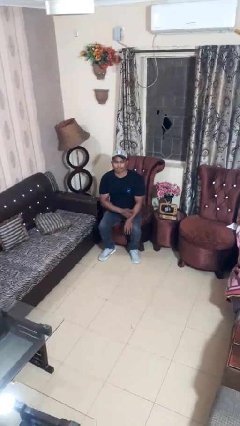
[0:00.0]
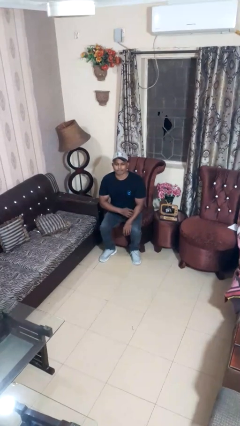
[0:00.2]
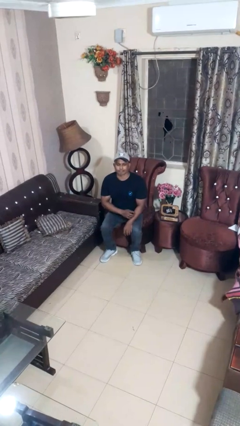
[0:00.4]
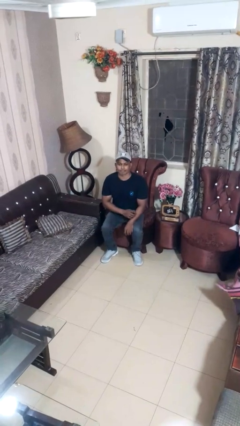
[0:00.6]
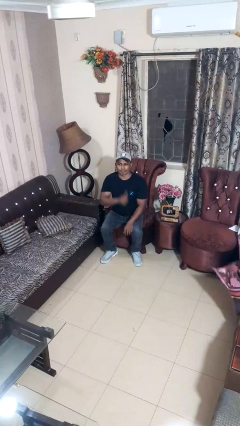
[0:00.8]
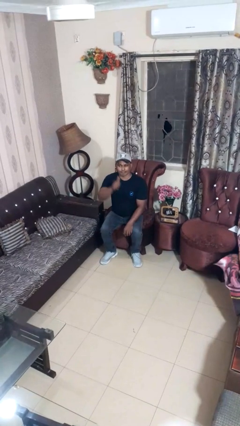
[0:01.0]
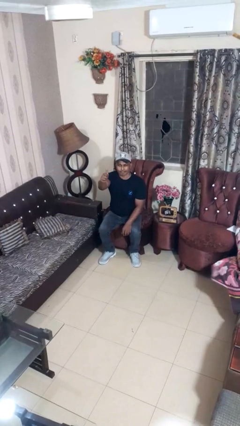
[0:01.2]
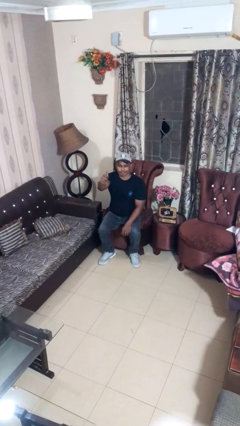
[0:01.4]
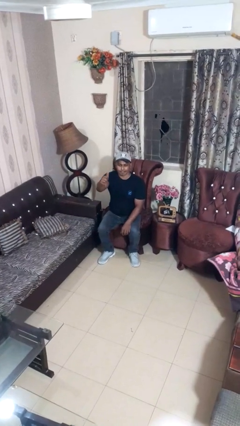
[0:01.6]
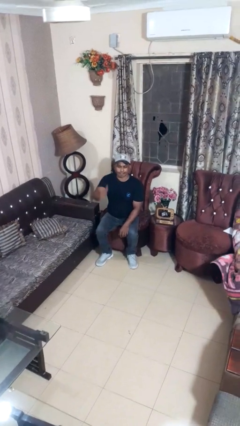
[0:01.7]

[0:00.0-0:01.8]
person gestures thumbs up

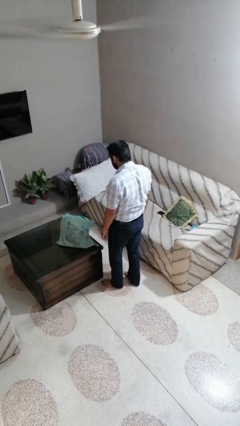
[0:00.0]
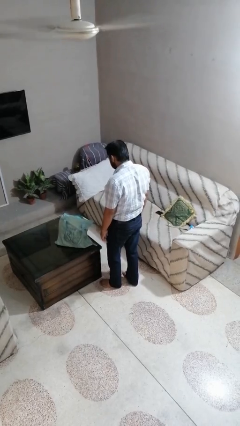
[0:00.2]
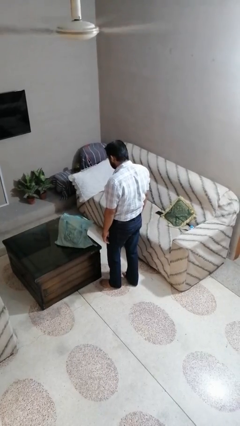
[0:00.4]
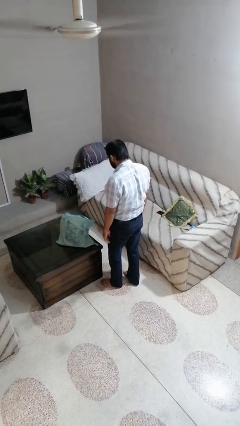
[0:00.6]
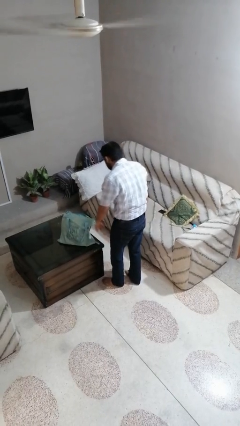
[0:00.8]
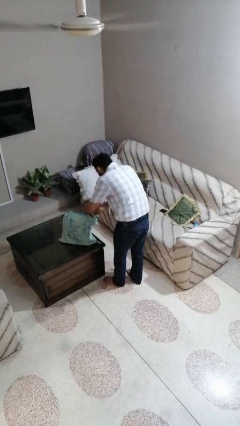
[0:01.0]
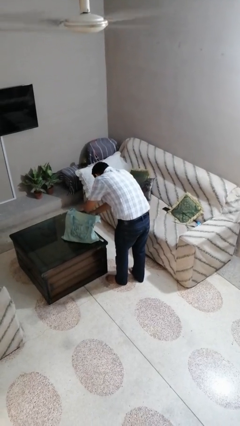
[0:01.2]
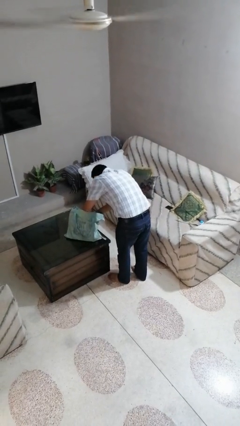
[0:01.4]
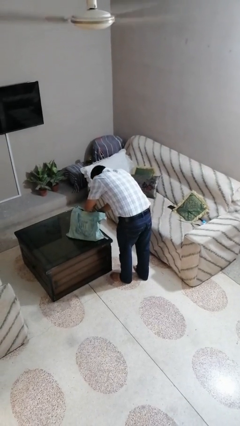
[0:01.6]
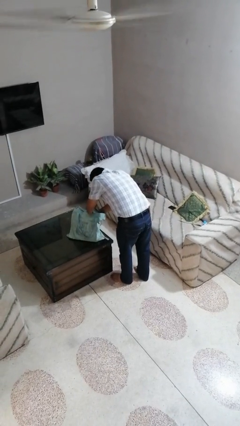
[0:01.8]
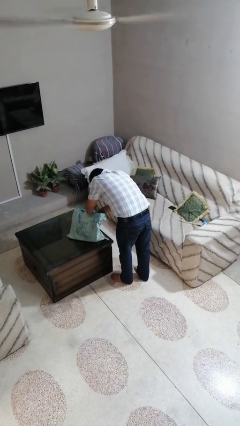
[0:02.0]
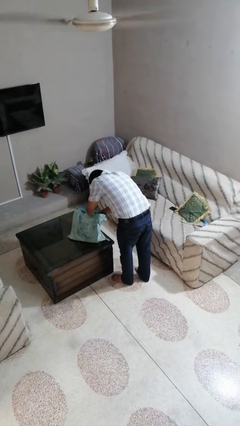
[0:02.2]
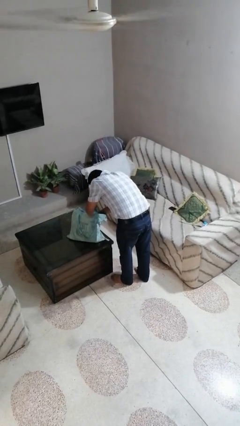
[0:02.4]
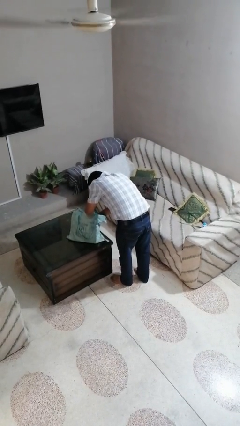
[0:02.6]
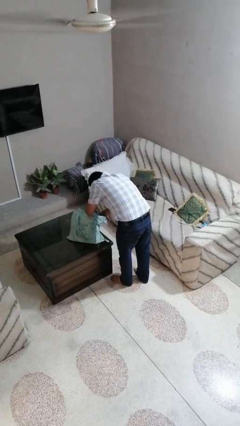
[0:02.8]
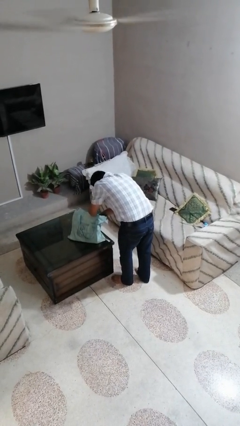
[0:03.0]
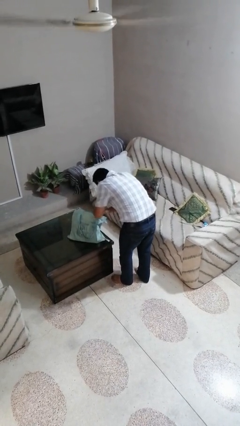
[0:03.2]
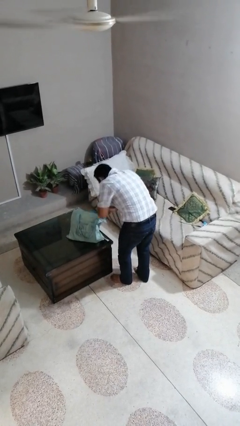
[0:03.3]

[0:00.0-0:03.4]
person searches in bag

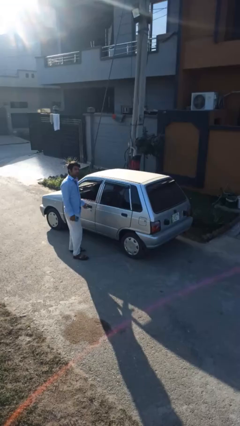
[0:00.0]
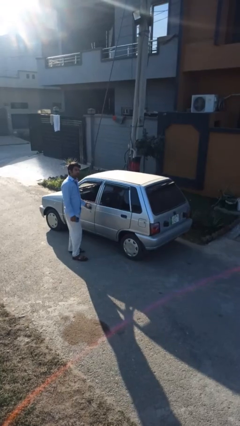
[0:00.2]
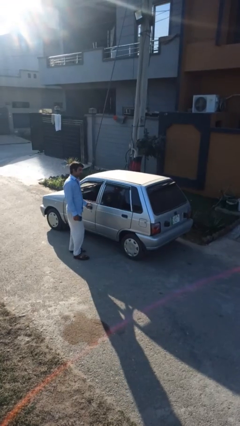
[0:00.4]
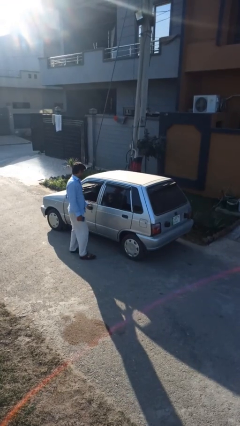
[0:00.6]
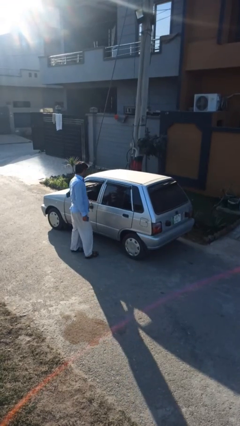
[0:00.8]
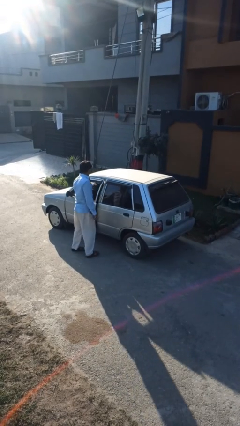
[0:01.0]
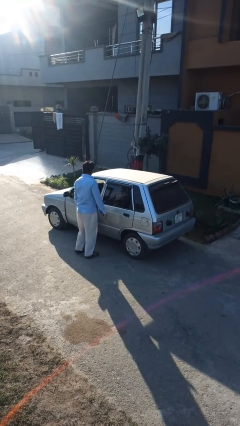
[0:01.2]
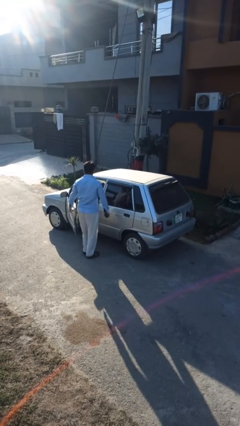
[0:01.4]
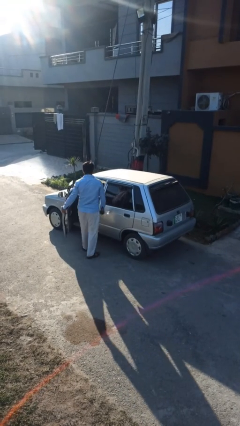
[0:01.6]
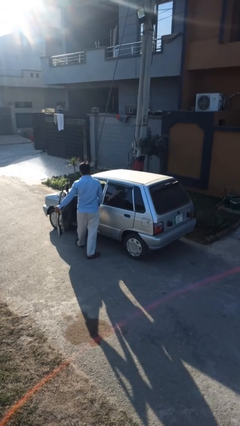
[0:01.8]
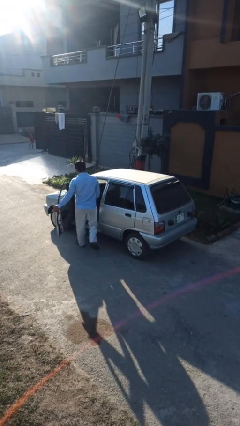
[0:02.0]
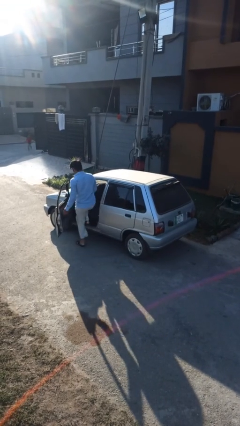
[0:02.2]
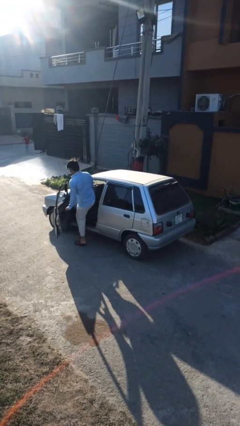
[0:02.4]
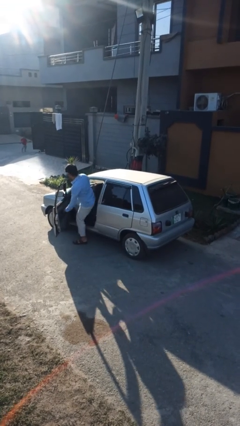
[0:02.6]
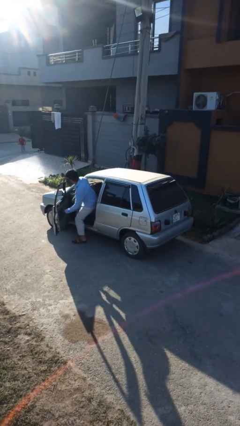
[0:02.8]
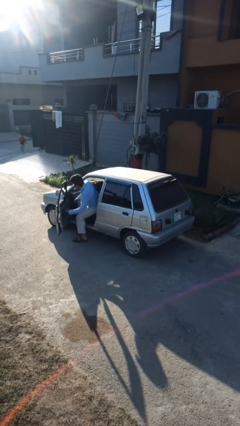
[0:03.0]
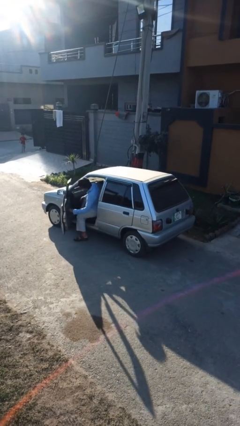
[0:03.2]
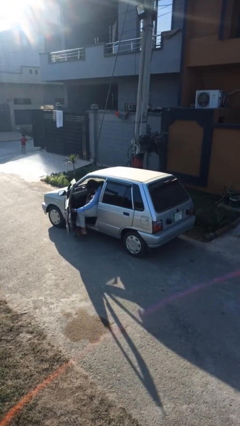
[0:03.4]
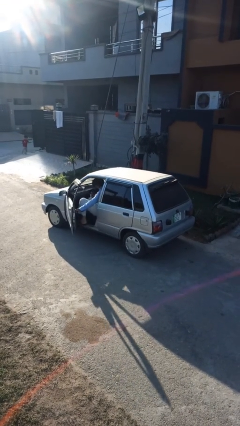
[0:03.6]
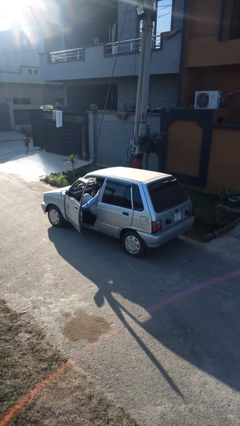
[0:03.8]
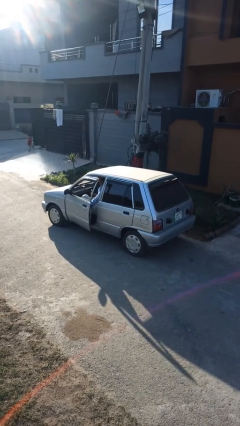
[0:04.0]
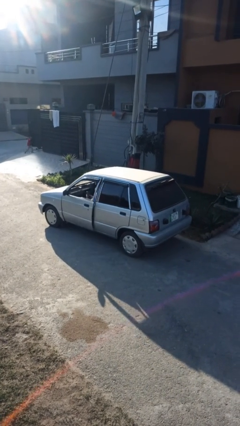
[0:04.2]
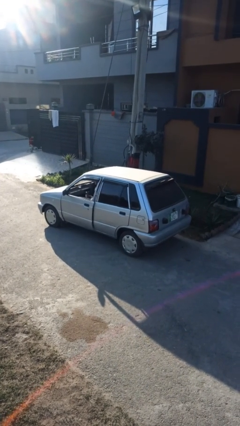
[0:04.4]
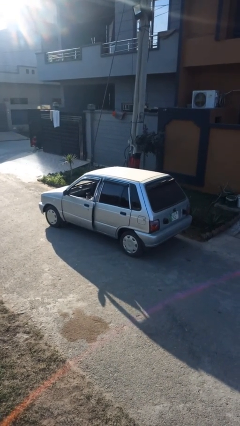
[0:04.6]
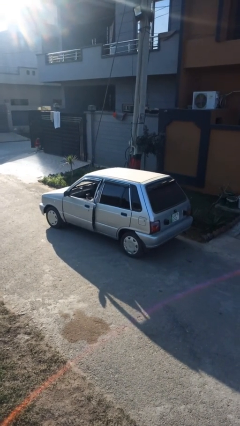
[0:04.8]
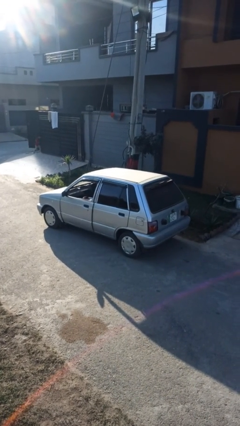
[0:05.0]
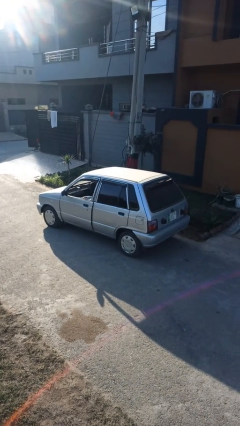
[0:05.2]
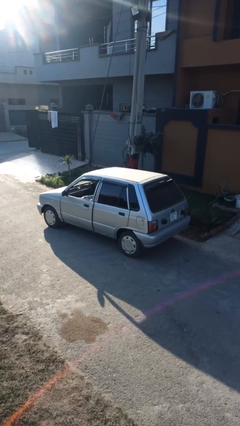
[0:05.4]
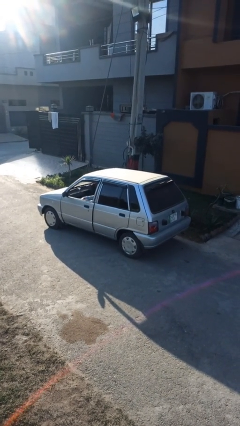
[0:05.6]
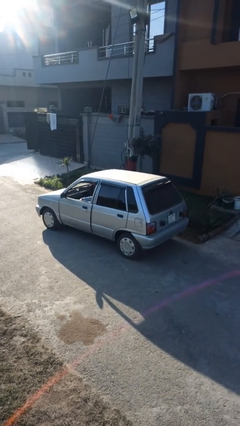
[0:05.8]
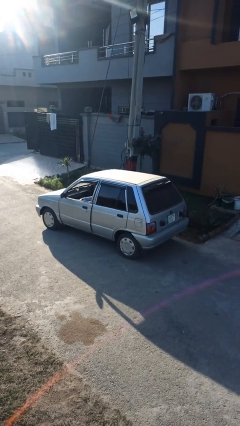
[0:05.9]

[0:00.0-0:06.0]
car picks up person

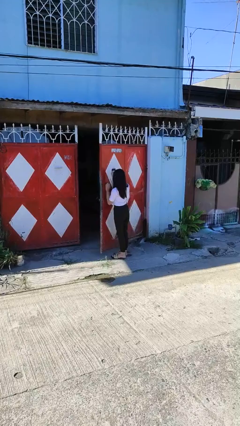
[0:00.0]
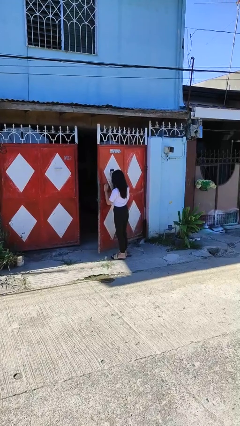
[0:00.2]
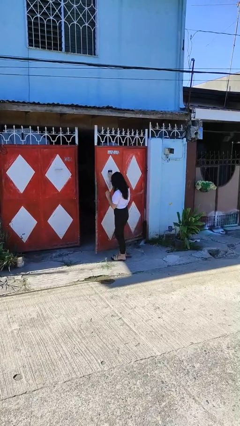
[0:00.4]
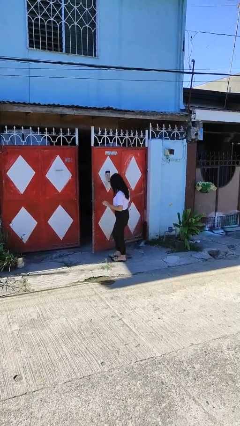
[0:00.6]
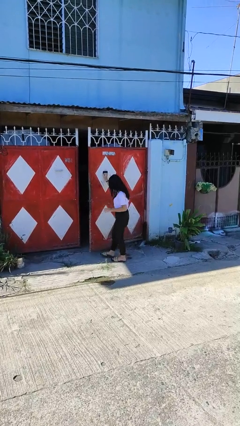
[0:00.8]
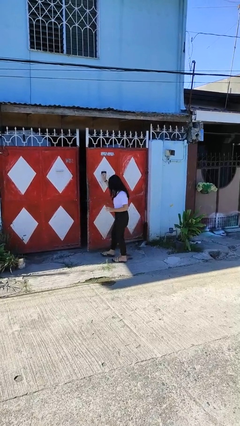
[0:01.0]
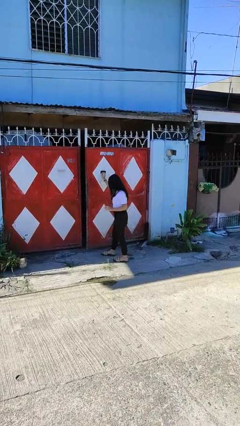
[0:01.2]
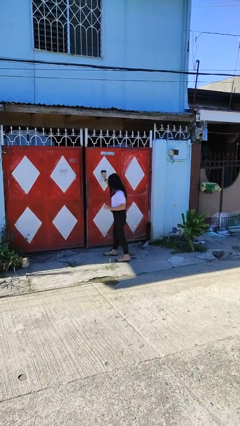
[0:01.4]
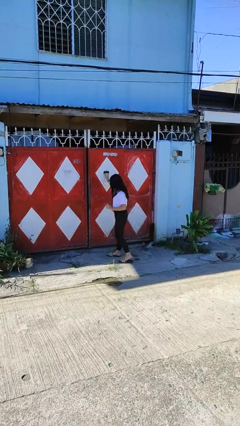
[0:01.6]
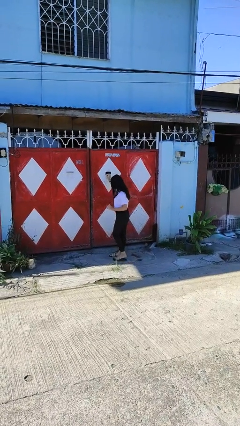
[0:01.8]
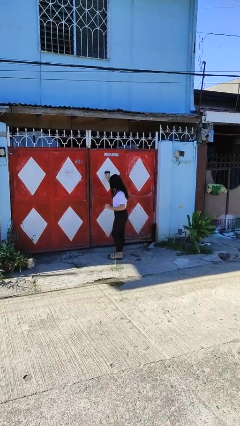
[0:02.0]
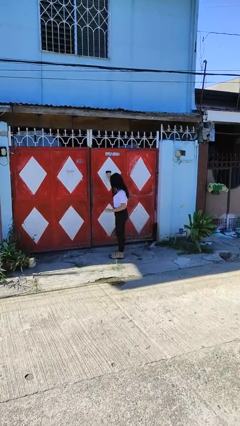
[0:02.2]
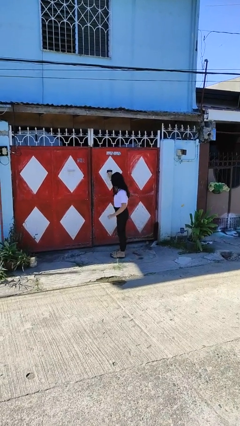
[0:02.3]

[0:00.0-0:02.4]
person closes gate

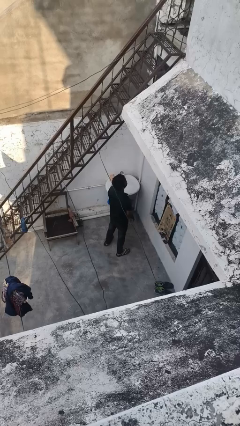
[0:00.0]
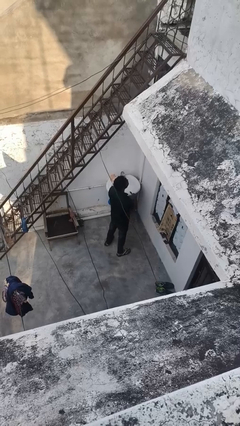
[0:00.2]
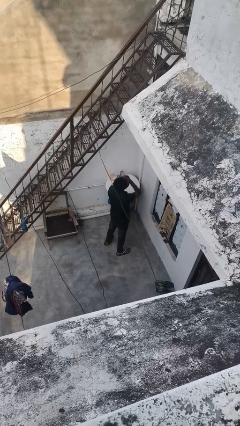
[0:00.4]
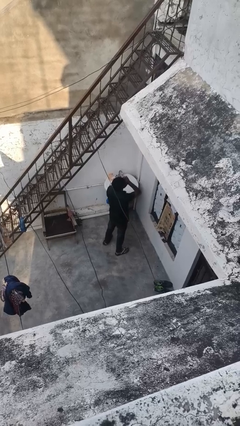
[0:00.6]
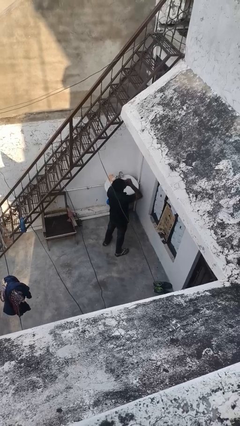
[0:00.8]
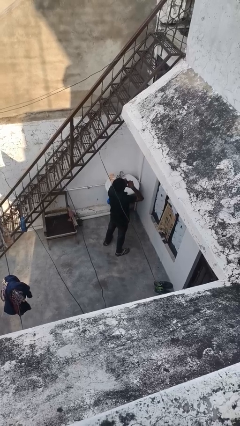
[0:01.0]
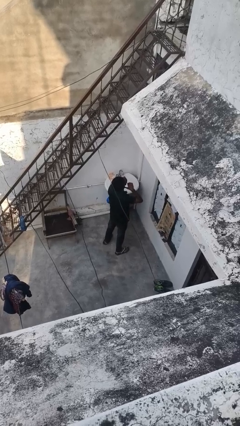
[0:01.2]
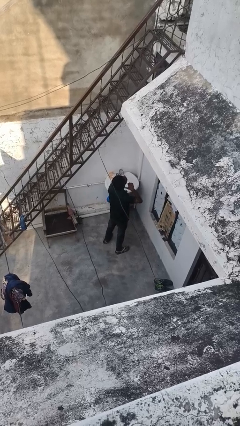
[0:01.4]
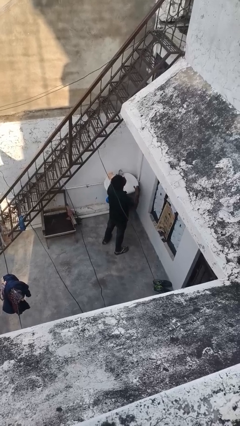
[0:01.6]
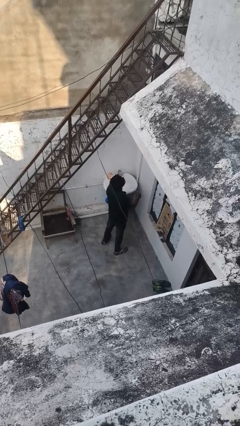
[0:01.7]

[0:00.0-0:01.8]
person gestures cut

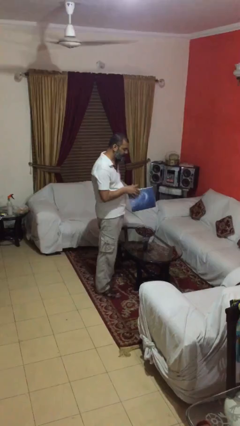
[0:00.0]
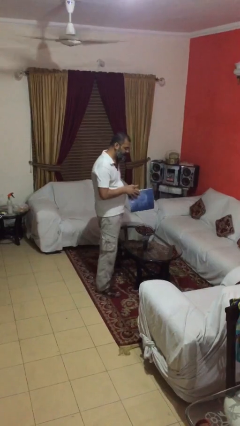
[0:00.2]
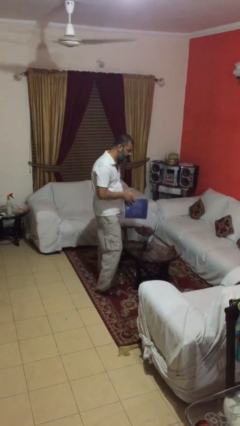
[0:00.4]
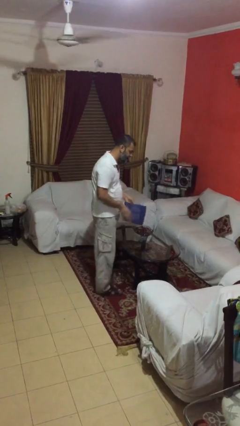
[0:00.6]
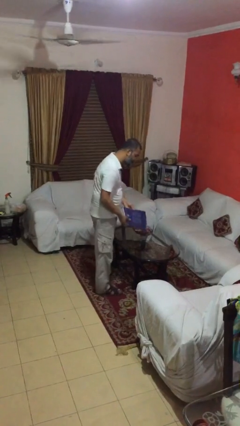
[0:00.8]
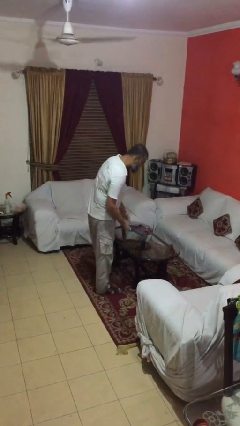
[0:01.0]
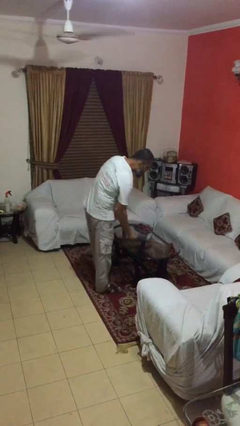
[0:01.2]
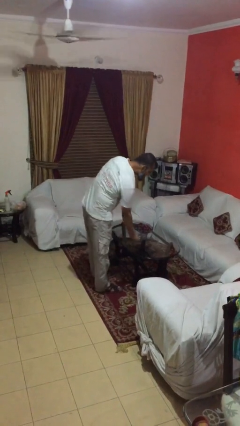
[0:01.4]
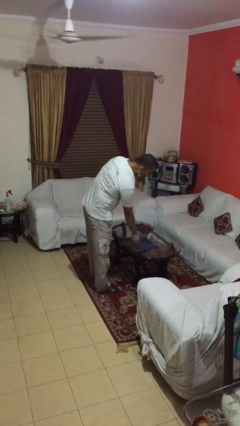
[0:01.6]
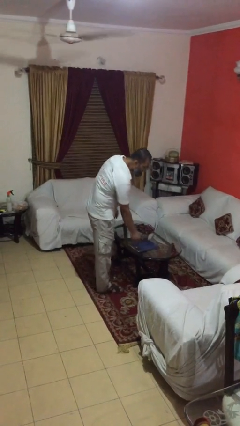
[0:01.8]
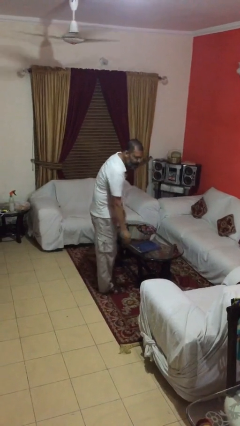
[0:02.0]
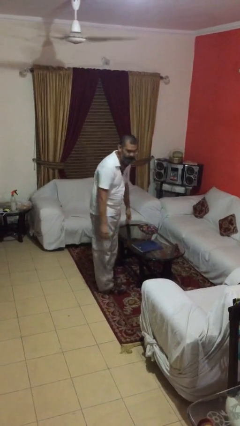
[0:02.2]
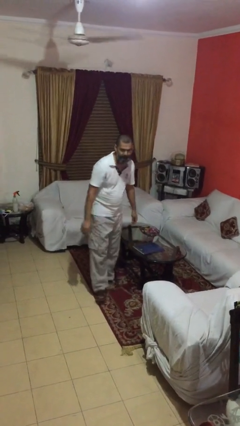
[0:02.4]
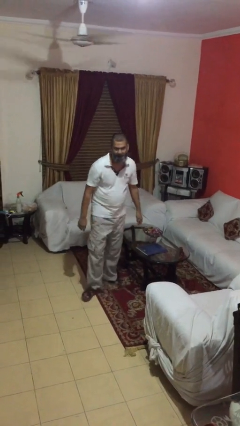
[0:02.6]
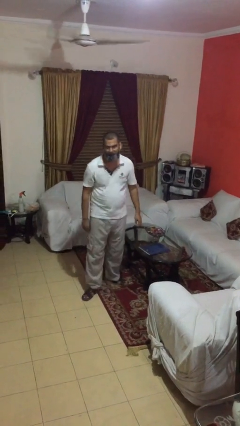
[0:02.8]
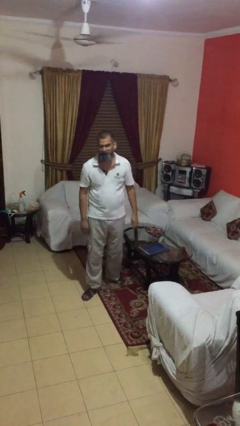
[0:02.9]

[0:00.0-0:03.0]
person puts down object on table
